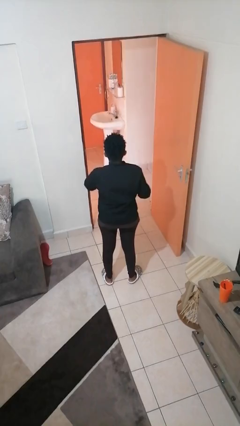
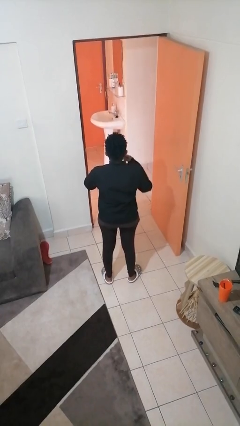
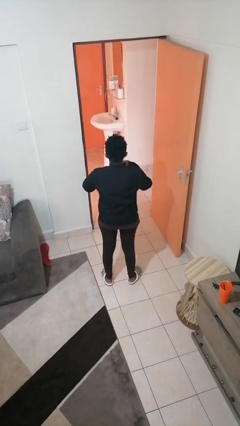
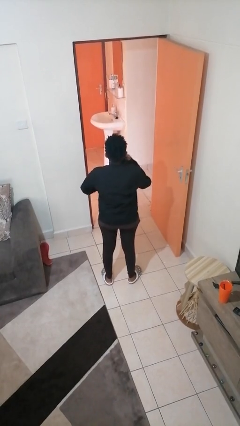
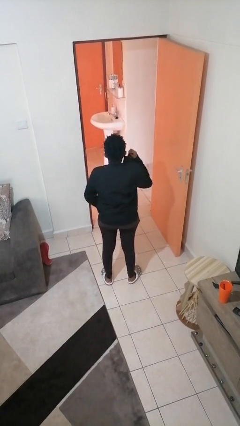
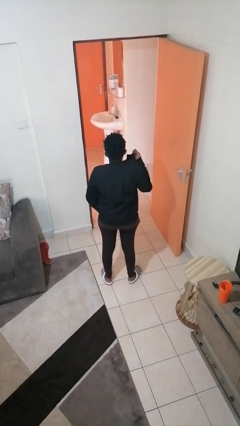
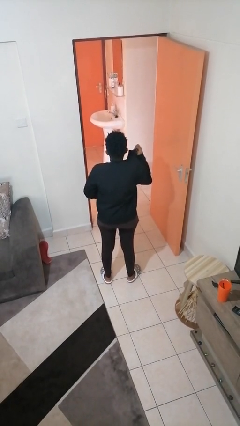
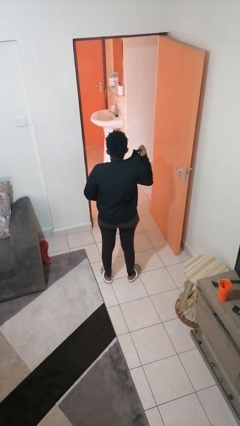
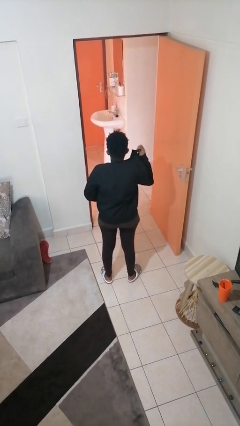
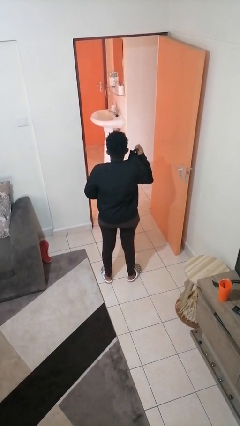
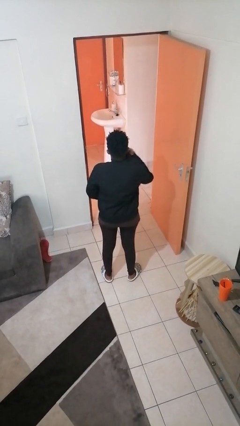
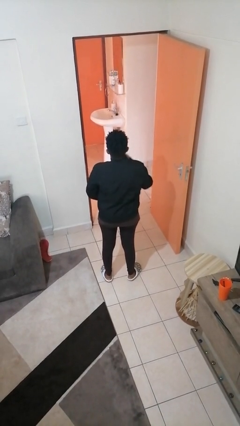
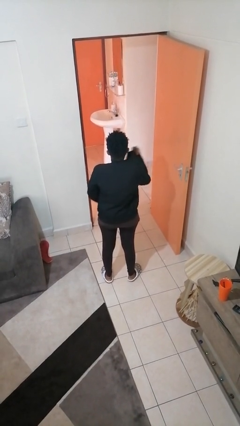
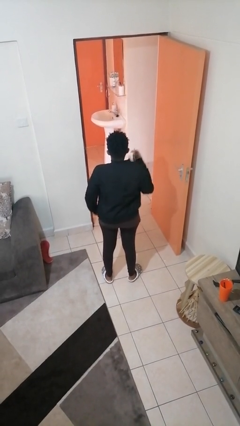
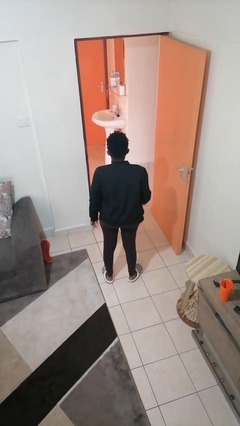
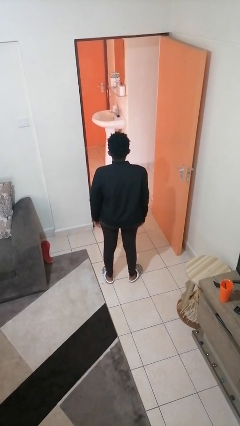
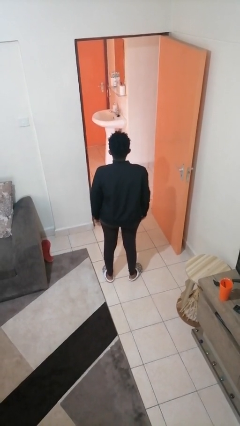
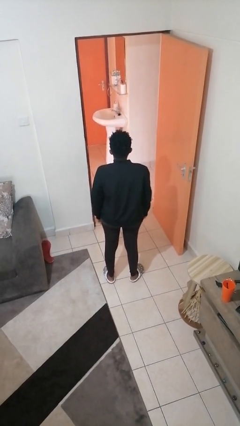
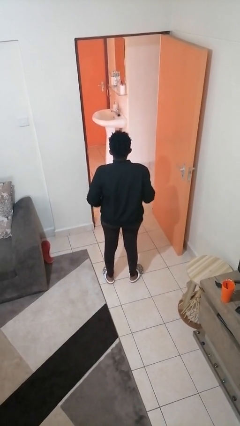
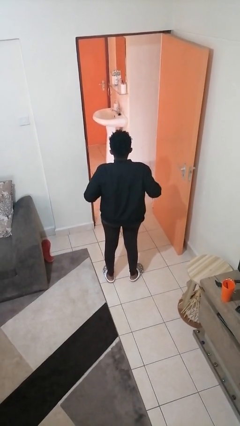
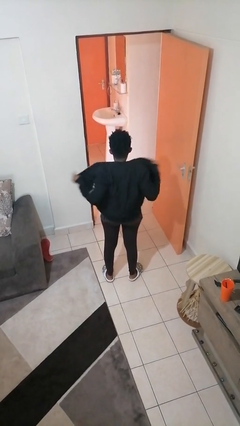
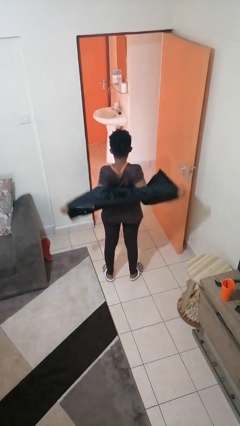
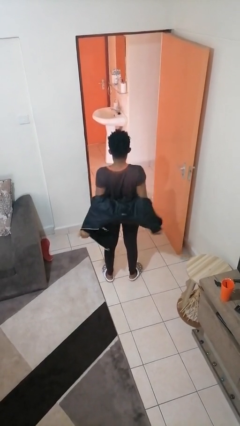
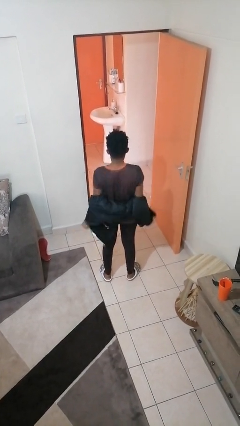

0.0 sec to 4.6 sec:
person unzips jacket

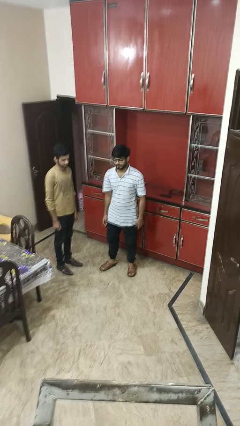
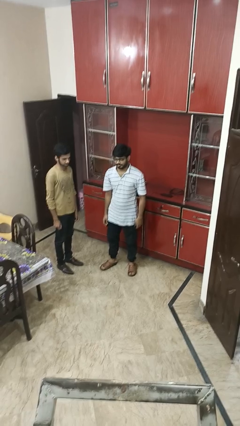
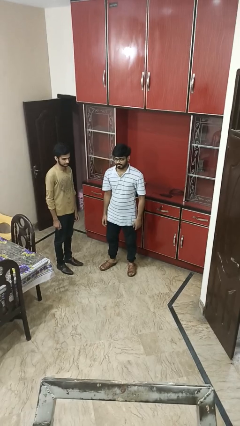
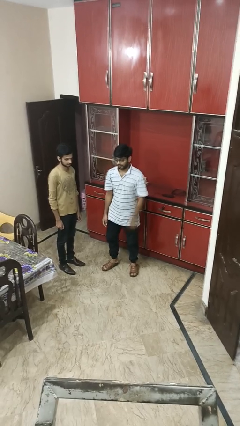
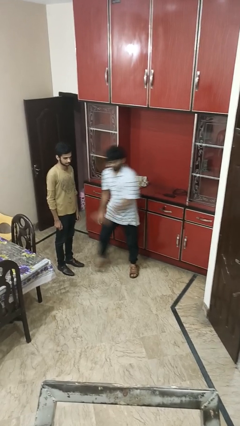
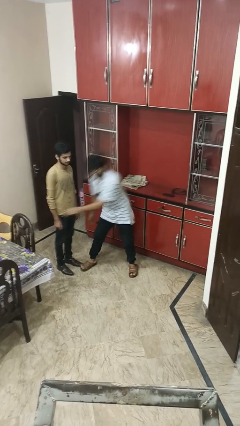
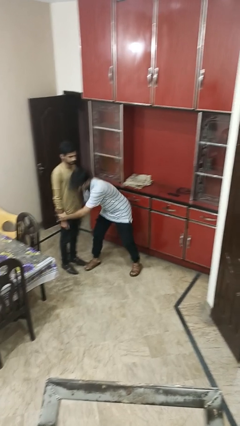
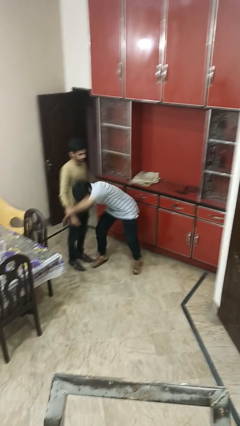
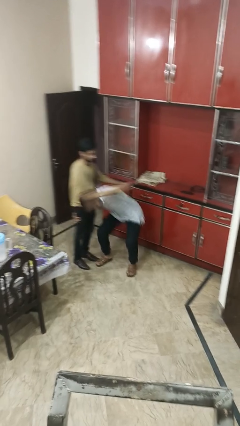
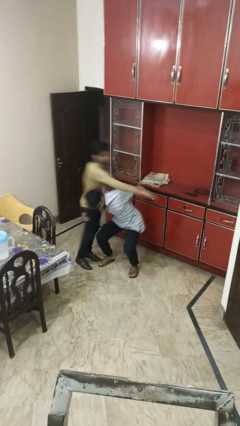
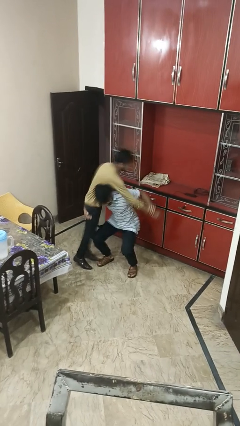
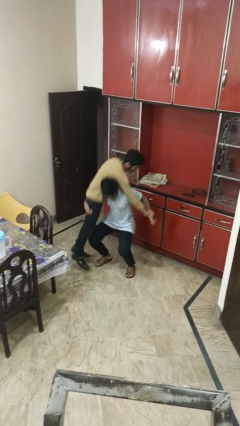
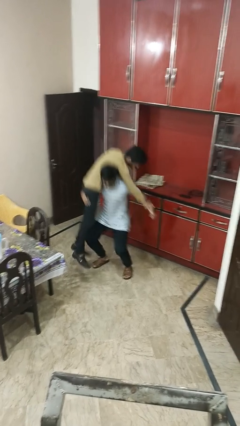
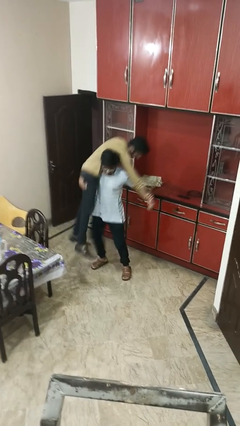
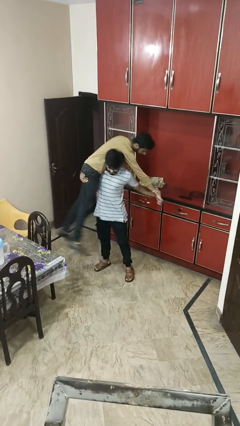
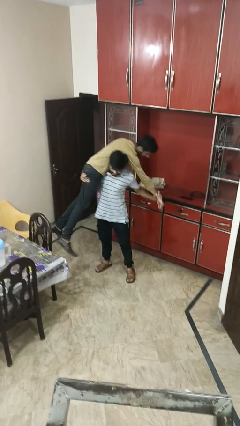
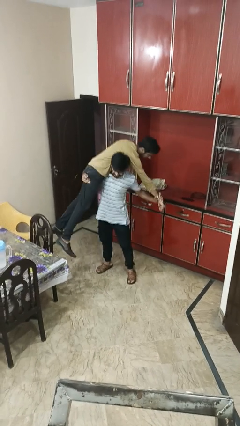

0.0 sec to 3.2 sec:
person carries person over shoulder

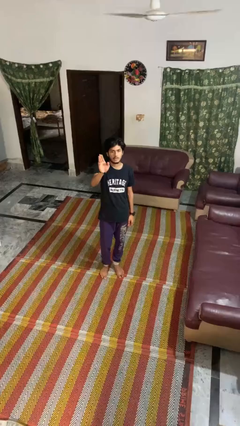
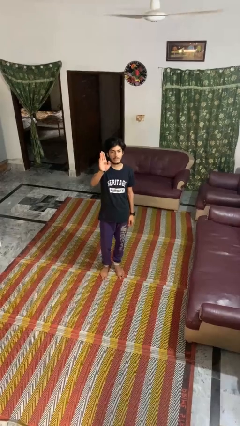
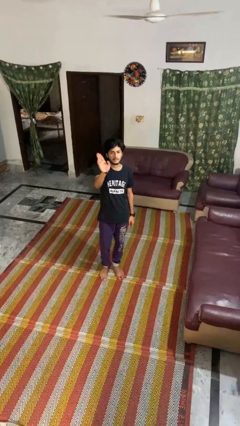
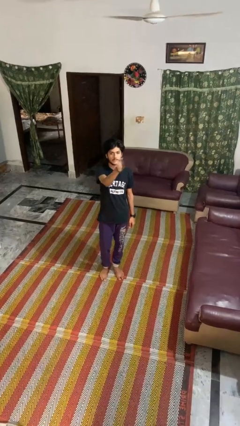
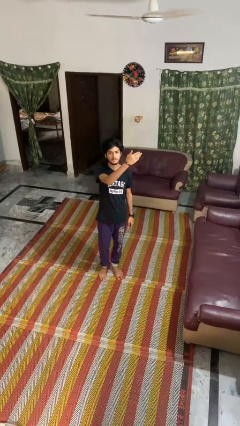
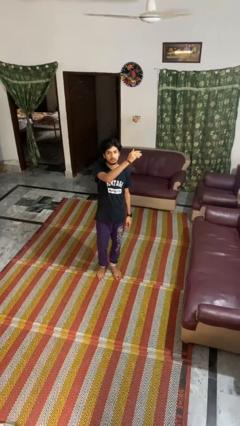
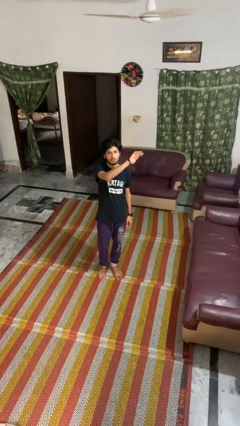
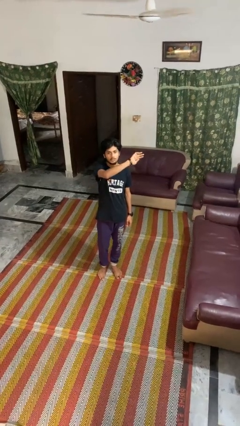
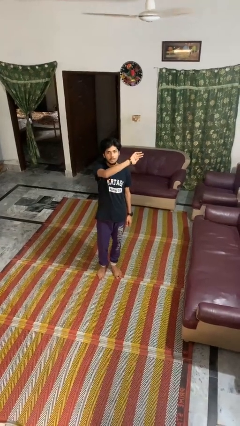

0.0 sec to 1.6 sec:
person gestures swipe left

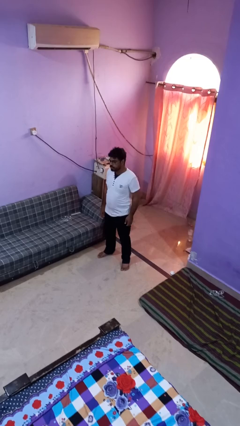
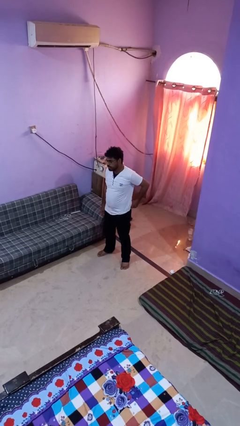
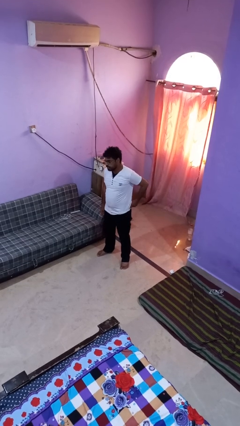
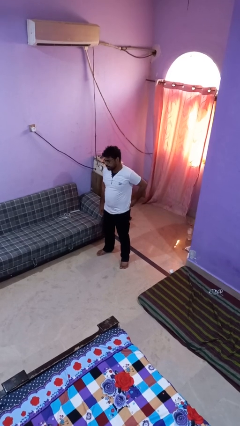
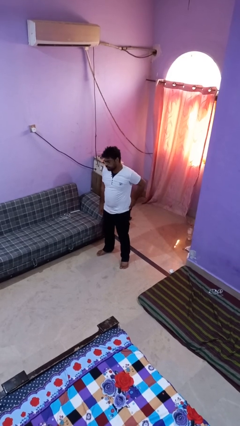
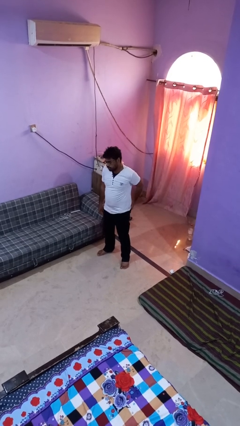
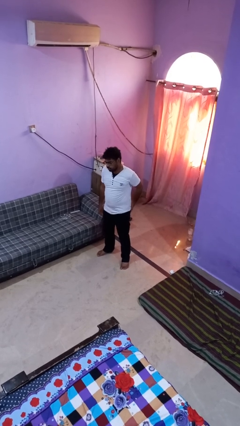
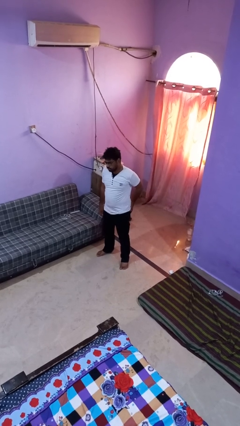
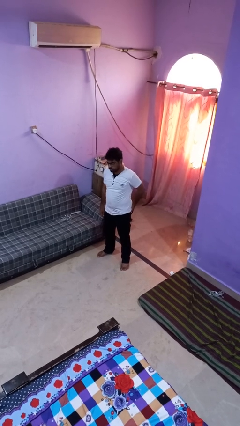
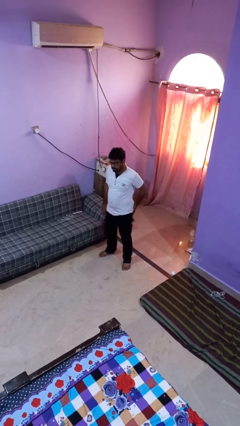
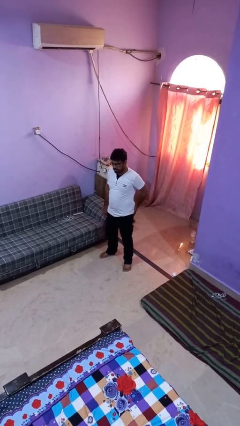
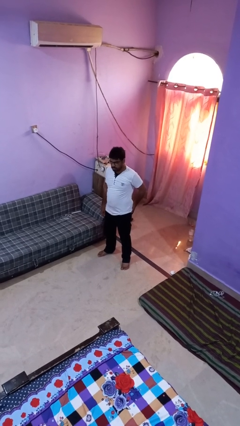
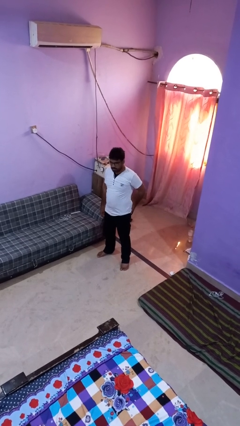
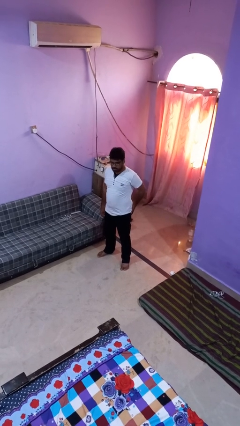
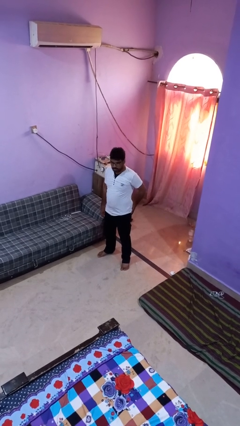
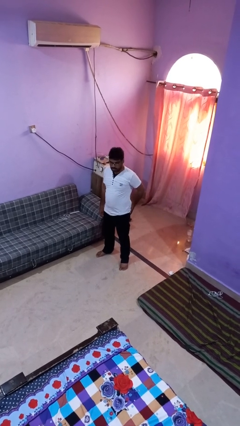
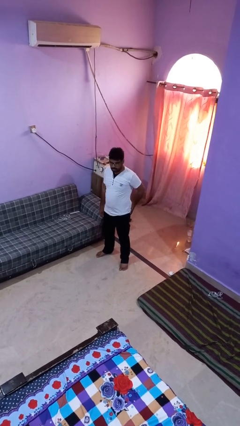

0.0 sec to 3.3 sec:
person puts hands in back pockets

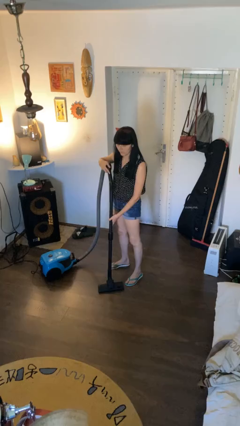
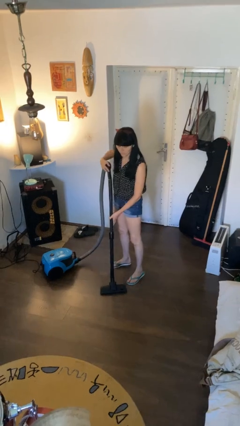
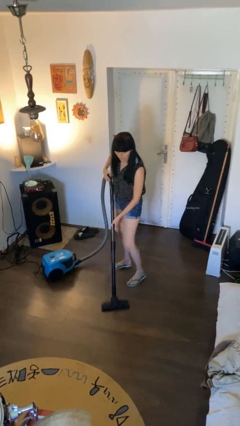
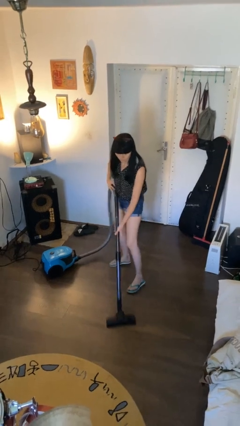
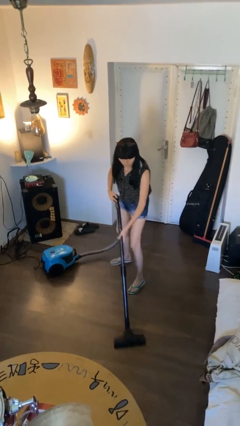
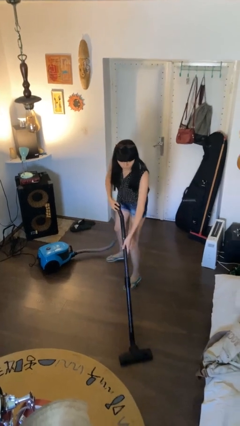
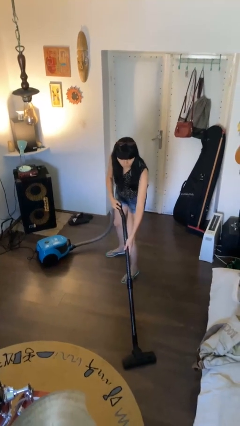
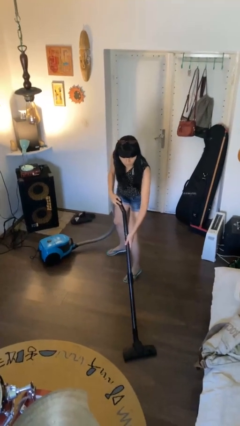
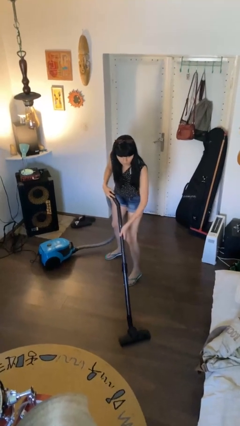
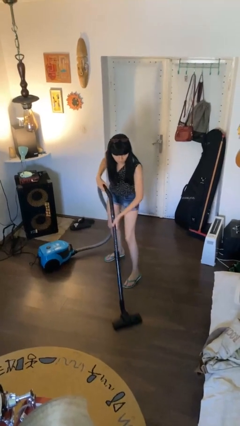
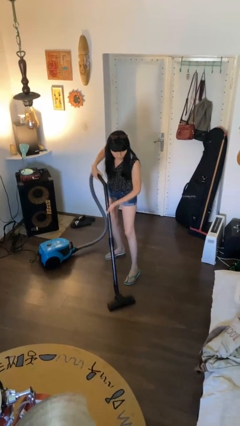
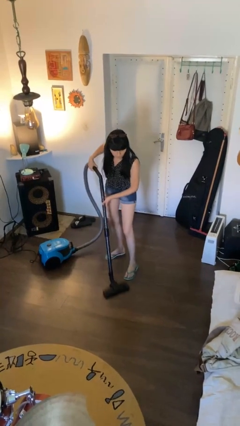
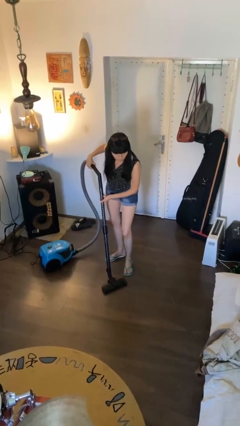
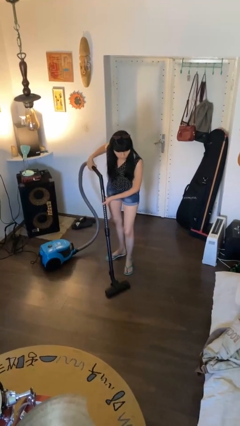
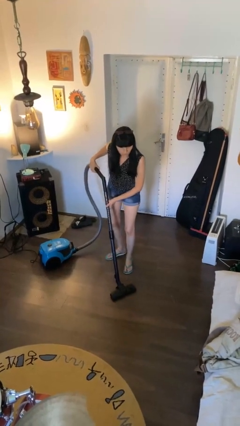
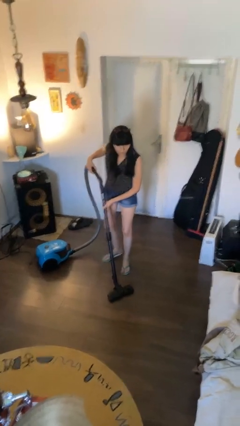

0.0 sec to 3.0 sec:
person vacuums carpet

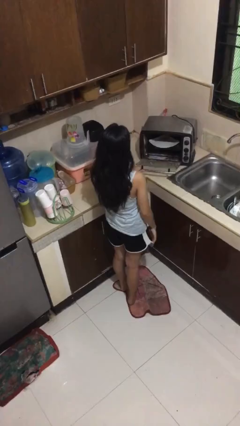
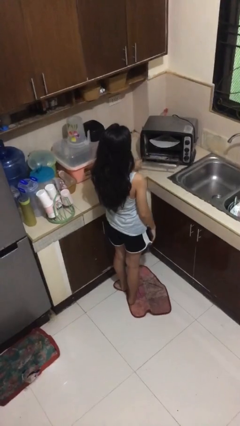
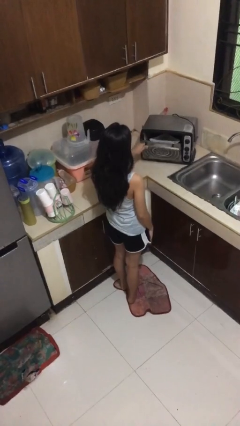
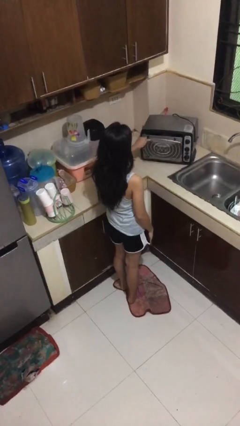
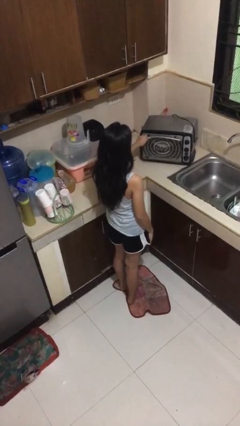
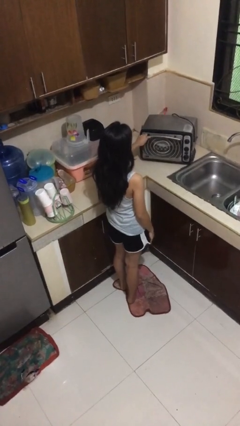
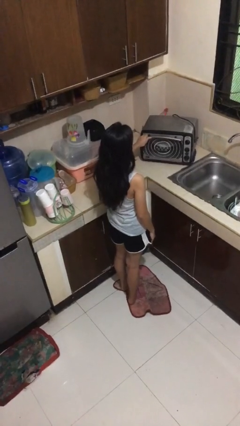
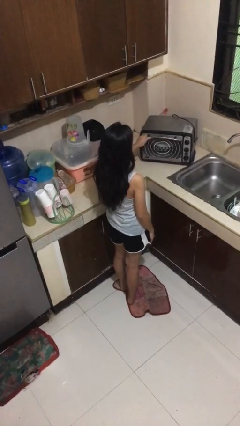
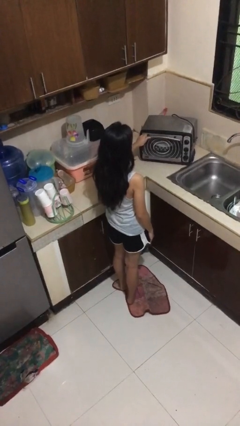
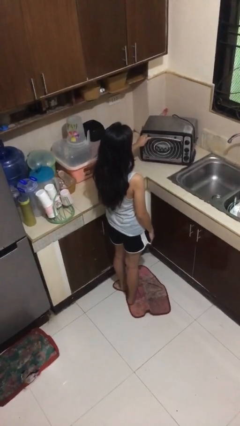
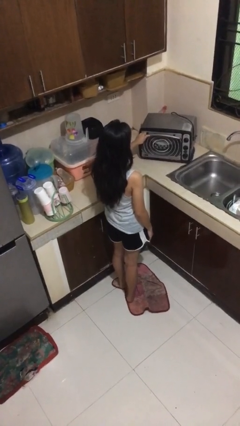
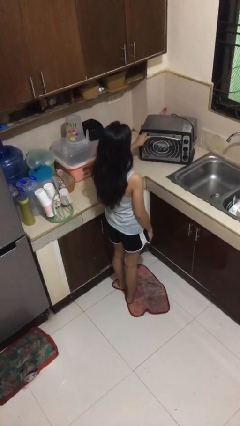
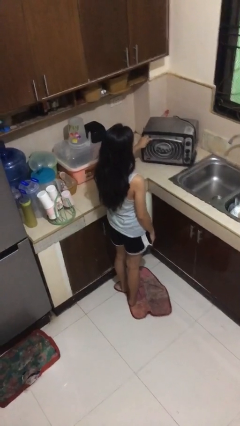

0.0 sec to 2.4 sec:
person closes microwave
